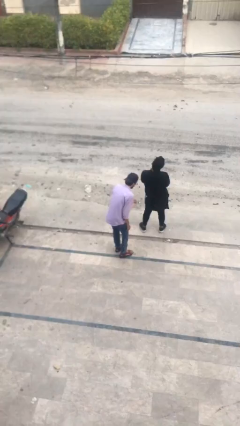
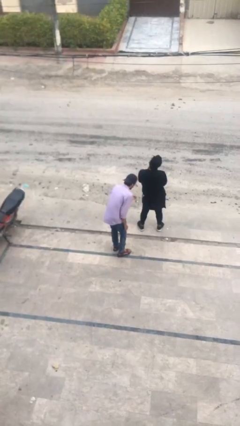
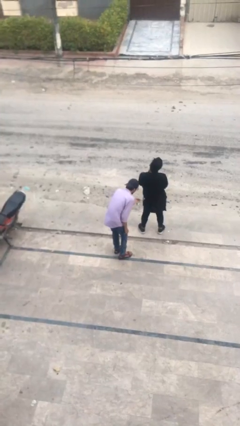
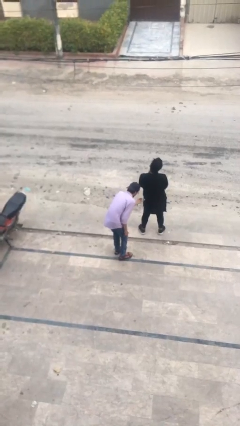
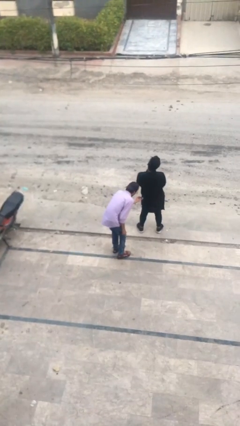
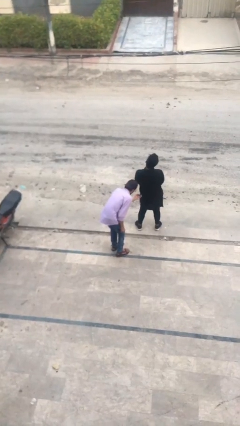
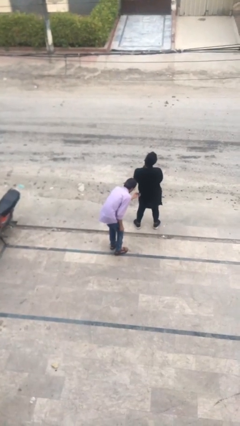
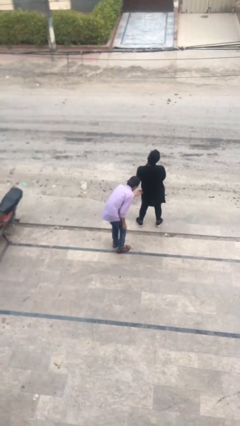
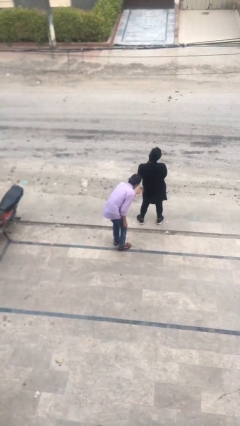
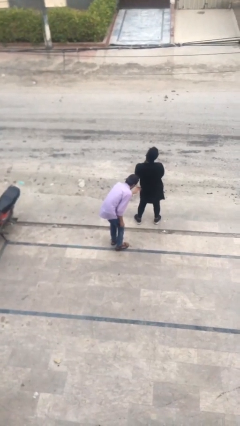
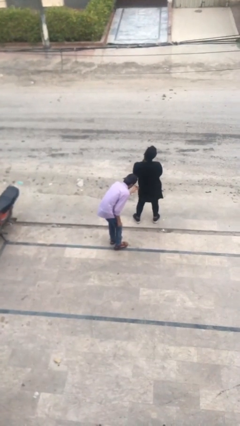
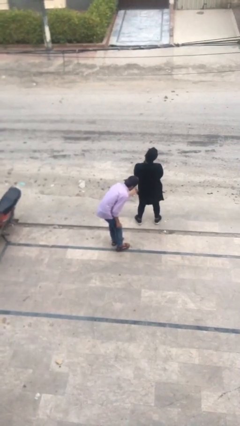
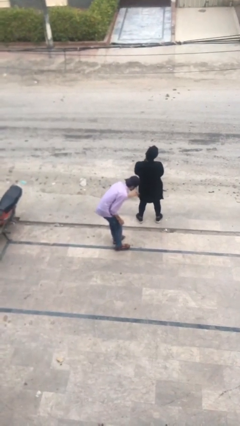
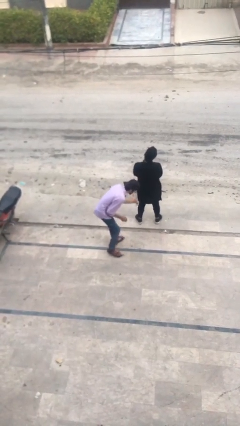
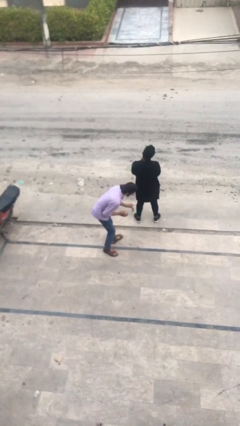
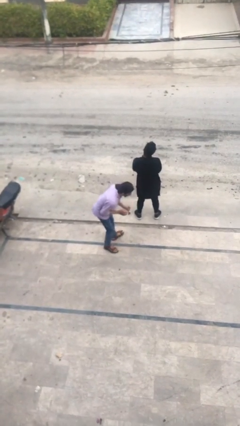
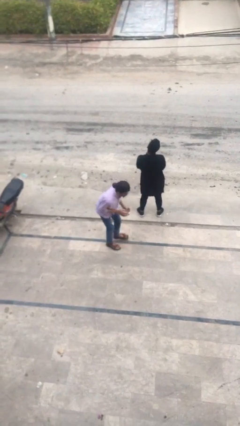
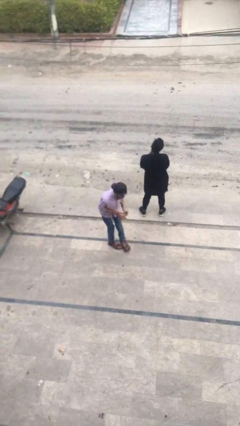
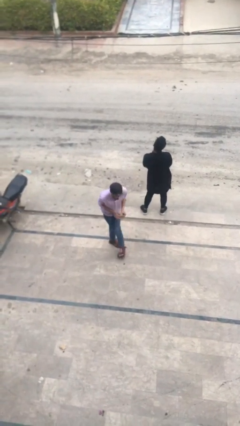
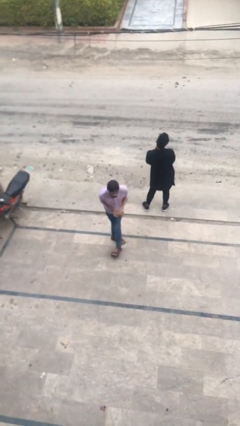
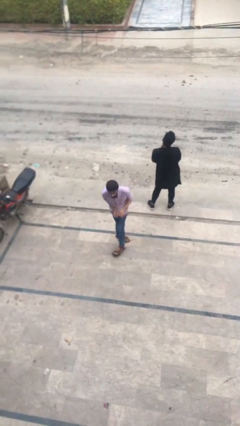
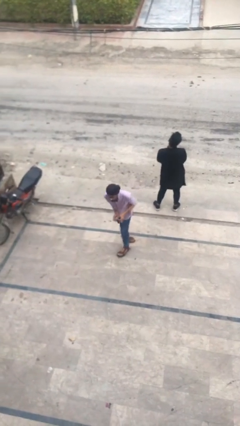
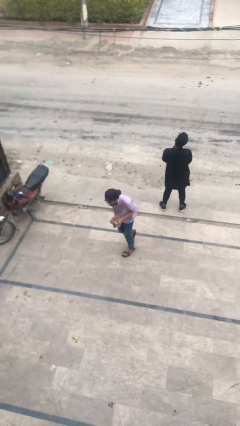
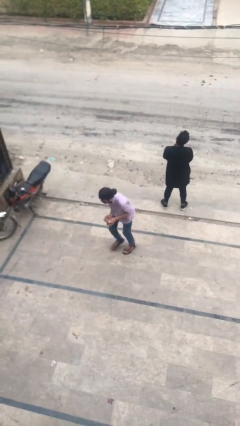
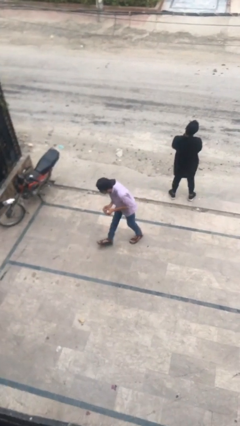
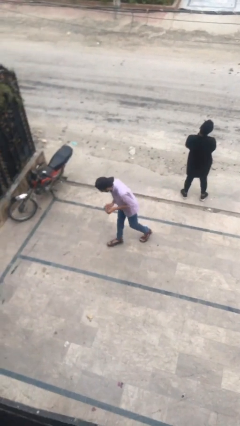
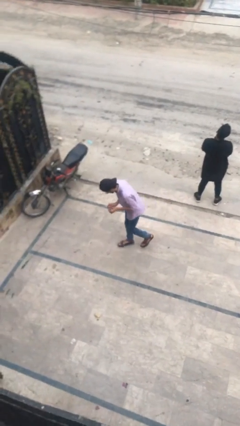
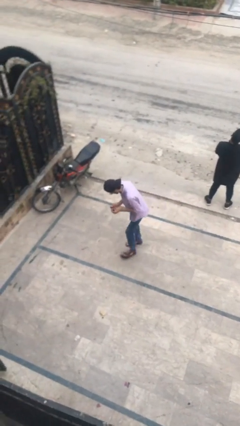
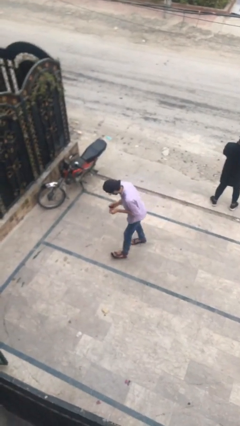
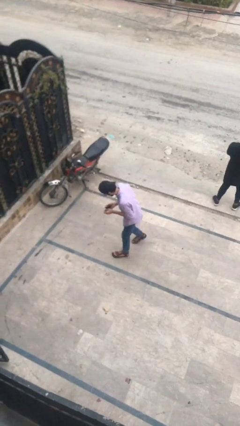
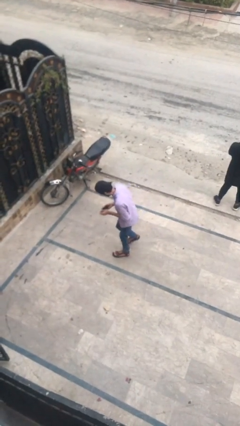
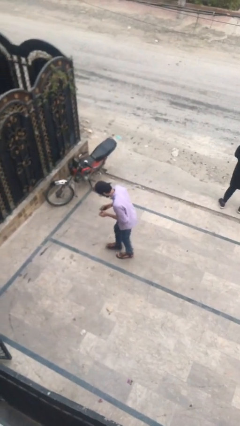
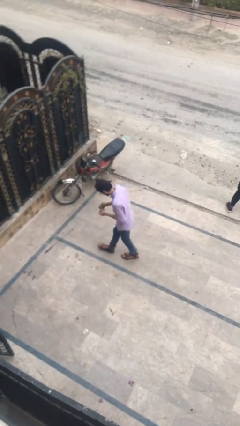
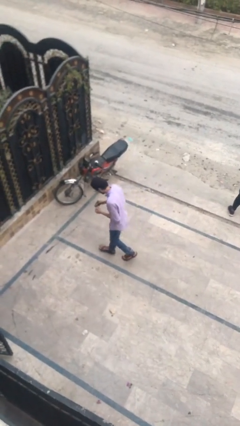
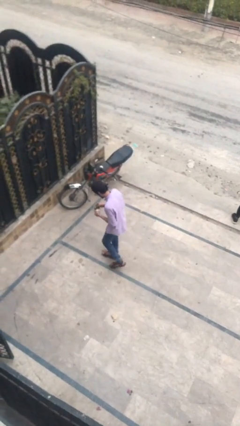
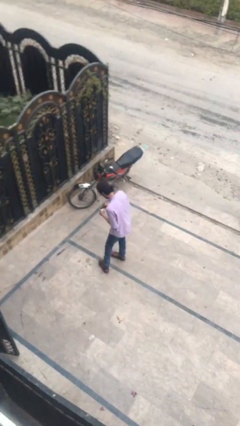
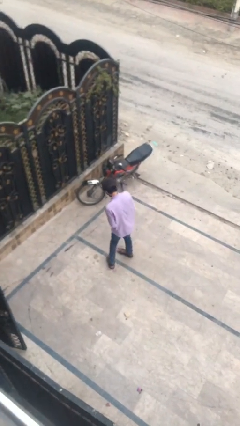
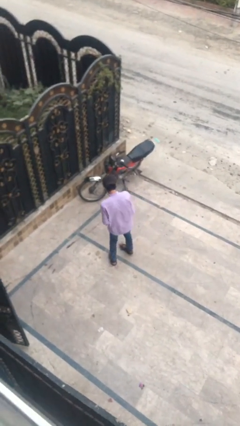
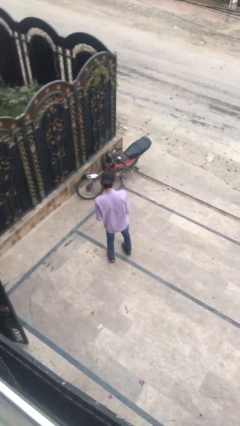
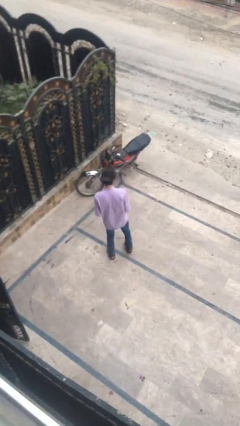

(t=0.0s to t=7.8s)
person steals object from person

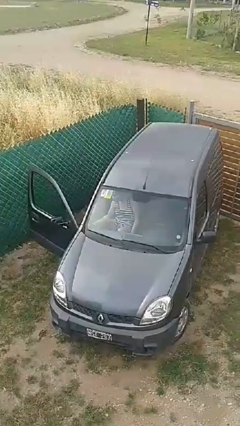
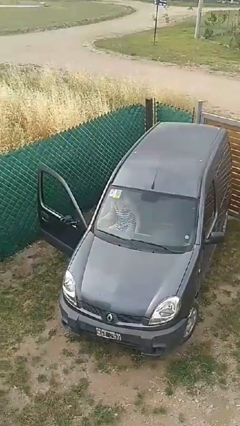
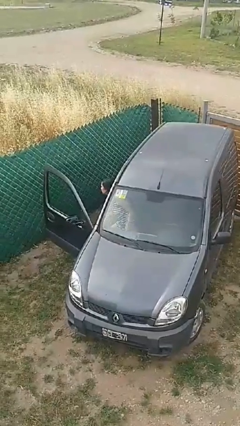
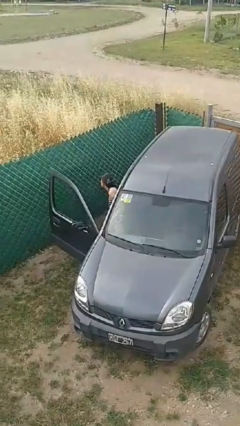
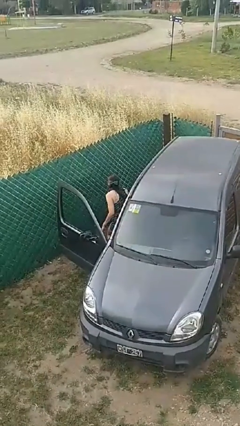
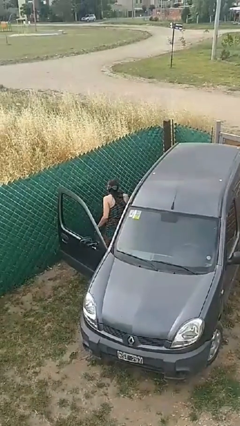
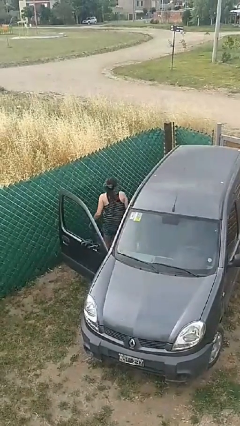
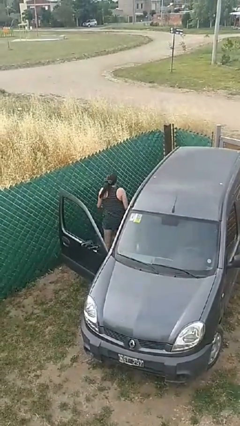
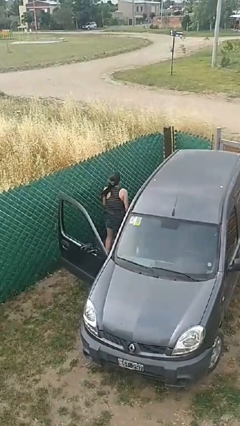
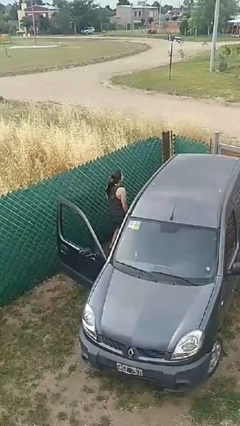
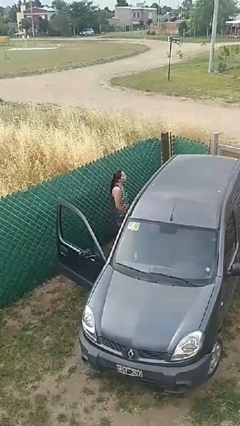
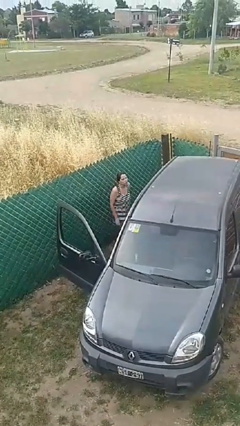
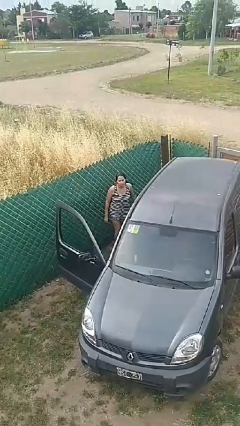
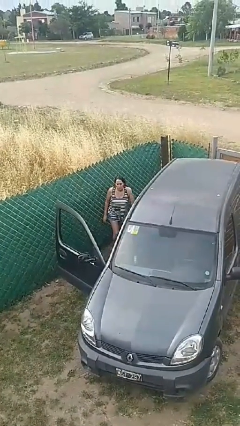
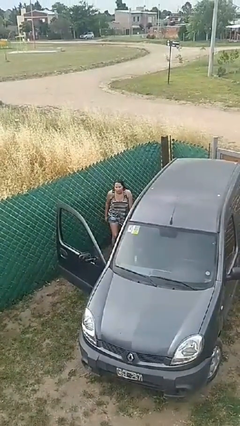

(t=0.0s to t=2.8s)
person exits car

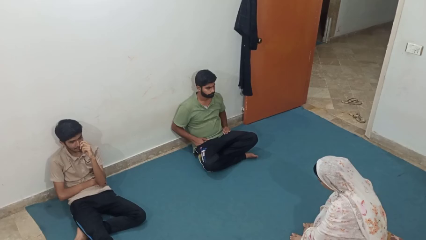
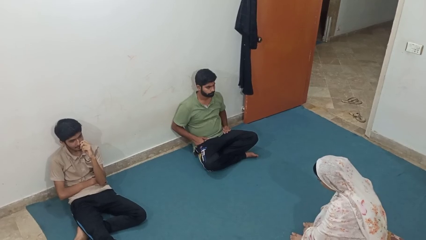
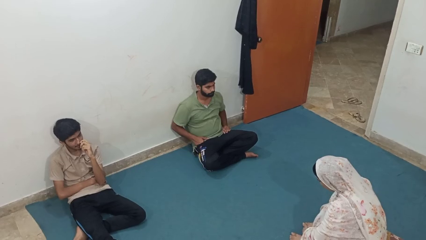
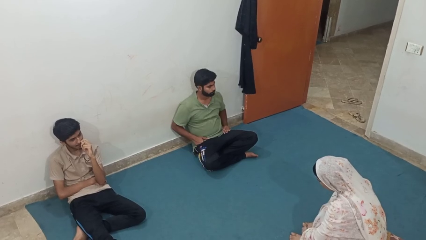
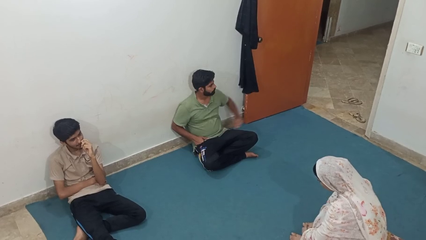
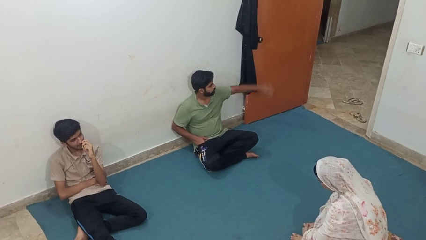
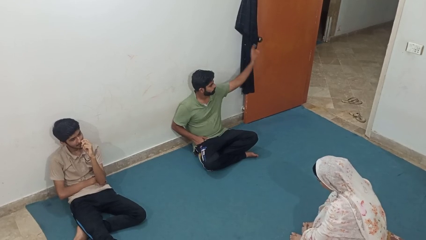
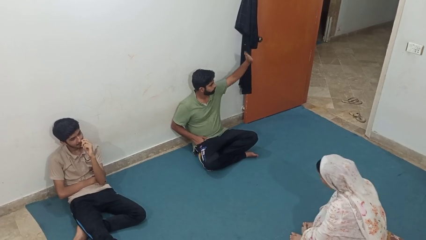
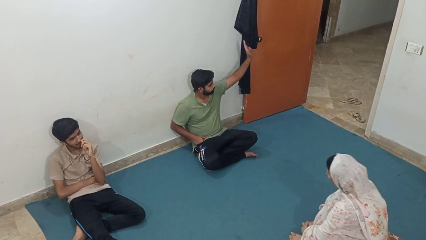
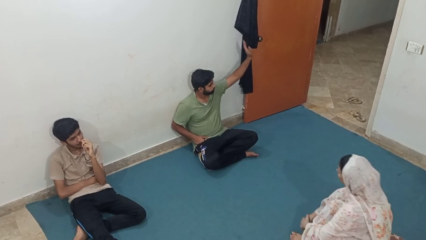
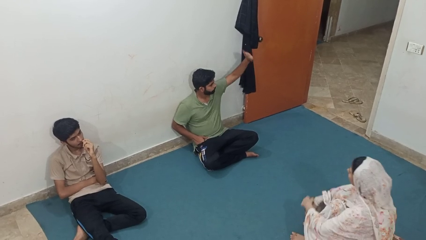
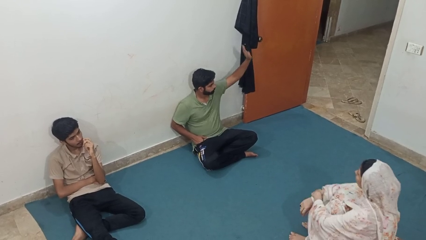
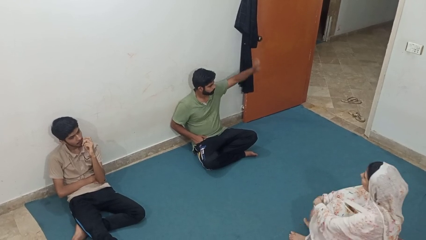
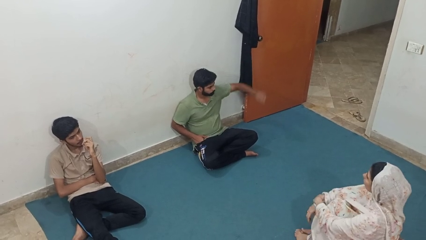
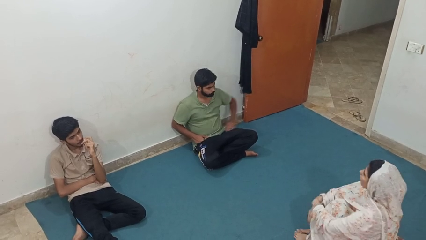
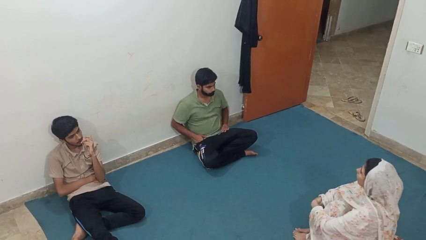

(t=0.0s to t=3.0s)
person waves at person

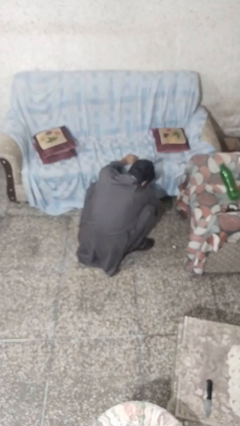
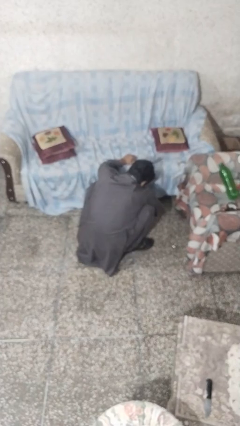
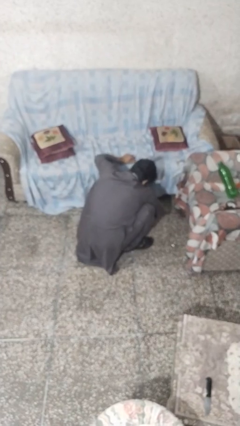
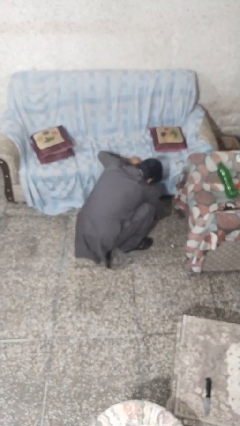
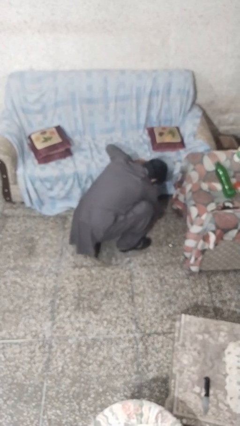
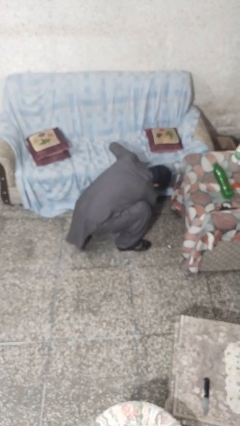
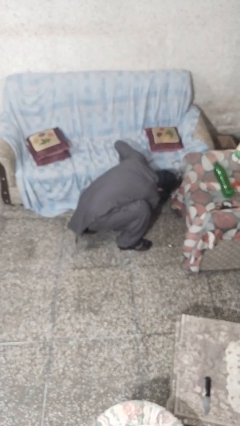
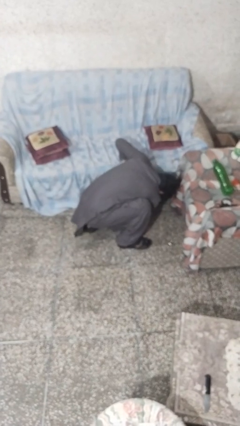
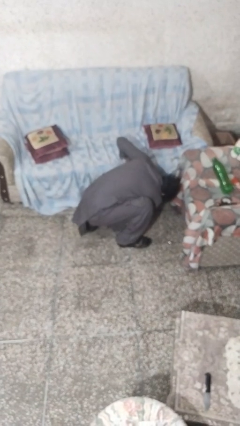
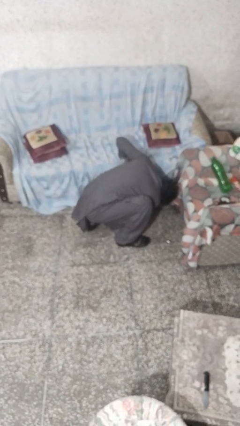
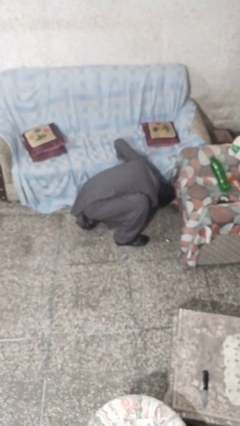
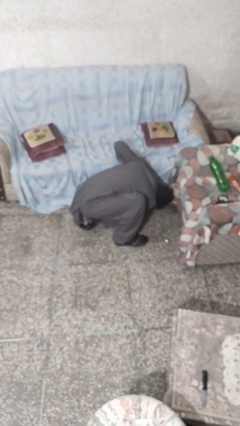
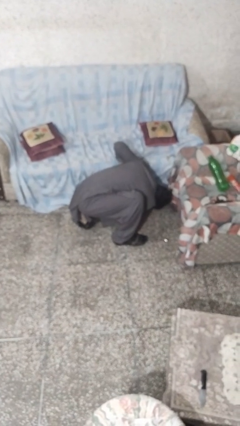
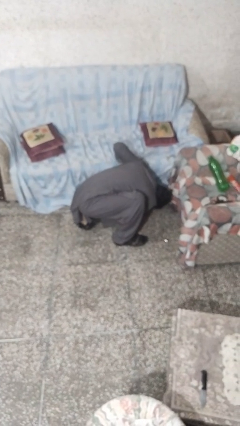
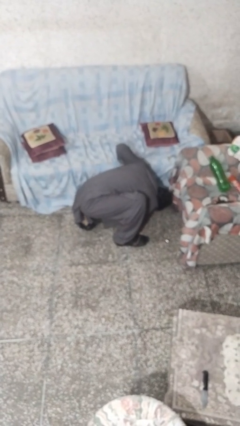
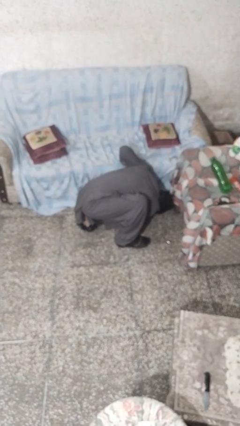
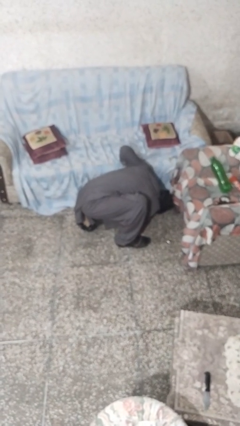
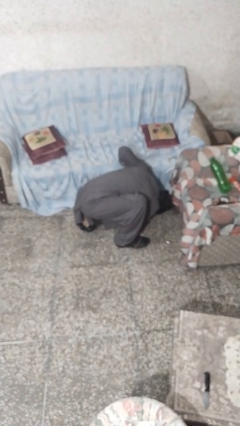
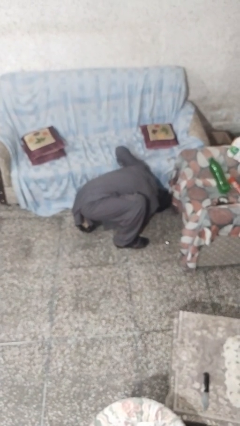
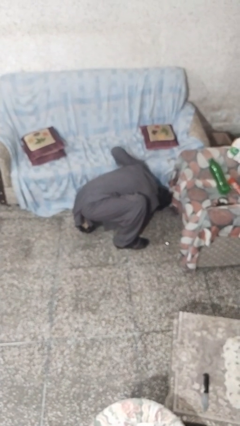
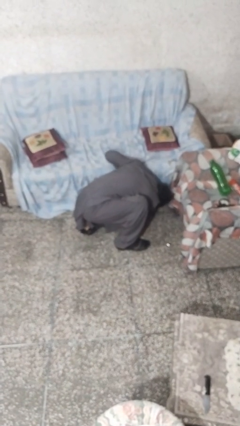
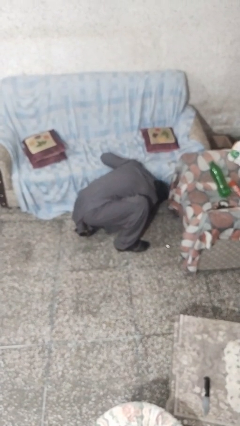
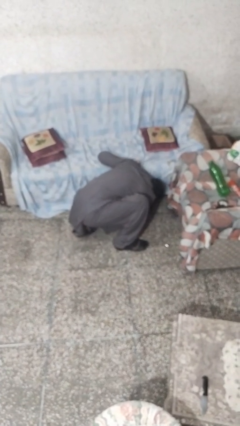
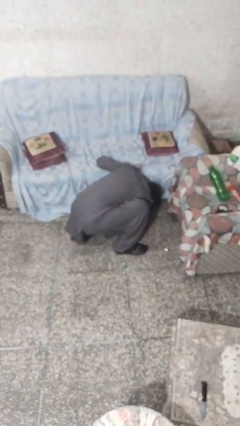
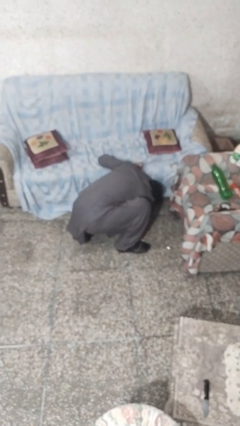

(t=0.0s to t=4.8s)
person searches under couch
